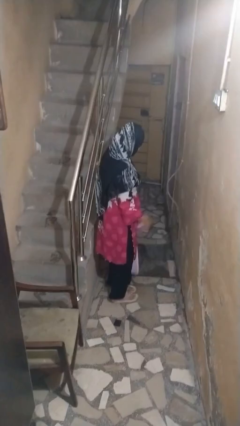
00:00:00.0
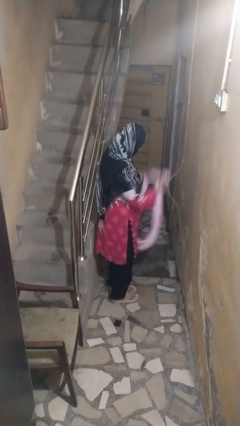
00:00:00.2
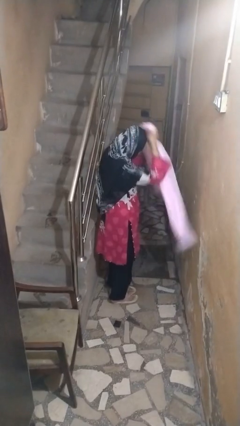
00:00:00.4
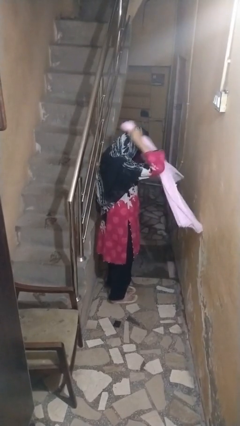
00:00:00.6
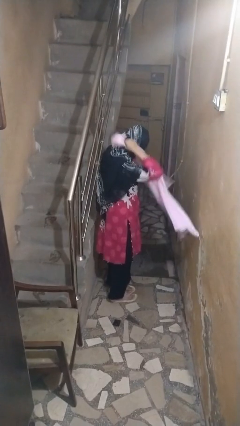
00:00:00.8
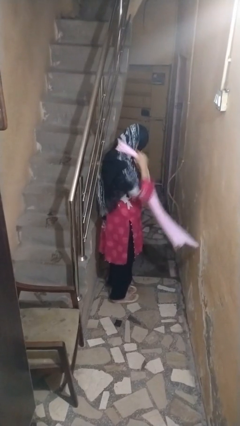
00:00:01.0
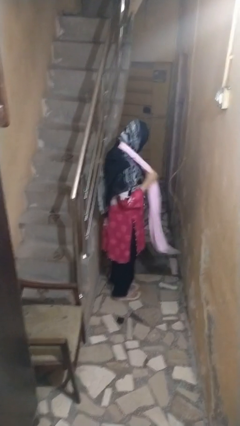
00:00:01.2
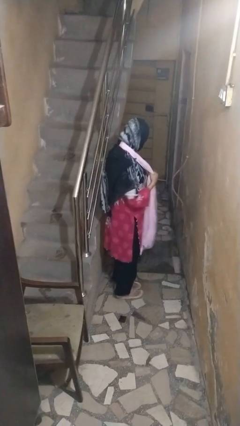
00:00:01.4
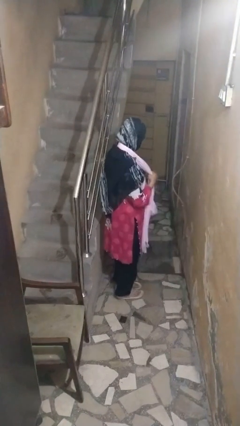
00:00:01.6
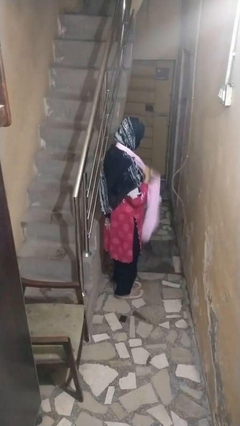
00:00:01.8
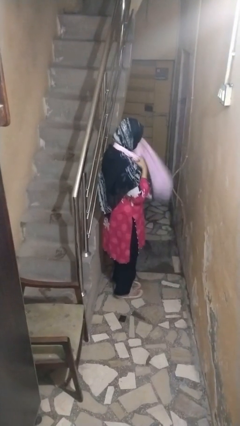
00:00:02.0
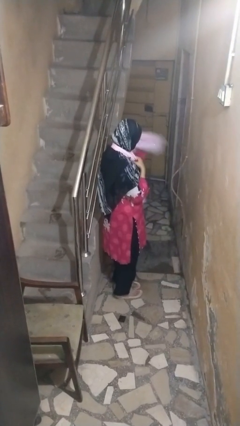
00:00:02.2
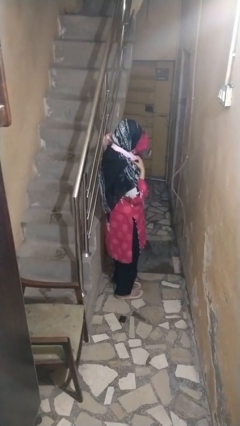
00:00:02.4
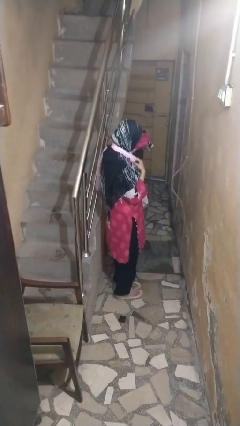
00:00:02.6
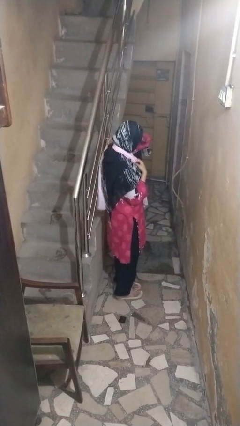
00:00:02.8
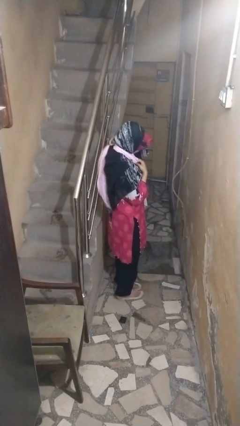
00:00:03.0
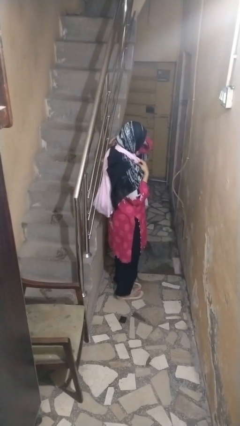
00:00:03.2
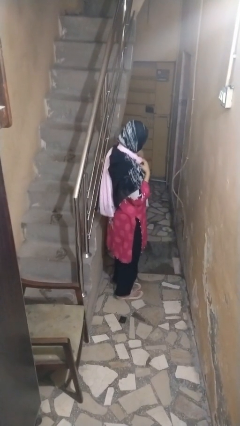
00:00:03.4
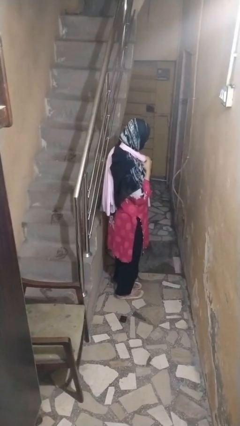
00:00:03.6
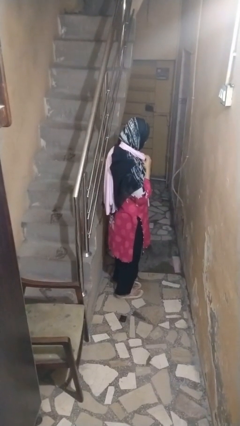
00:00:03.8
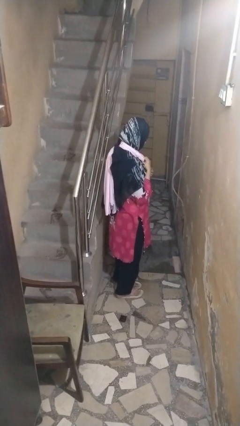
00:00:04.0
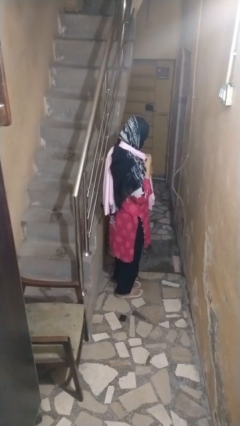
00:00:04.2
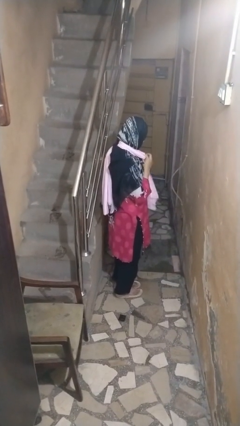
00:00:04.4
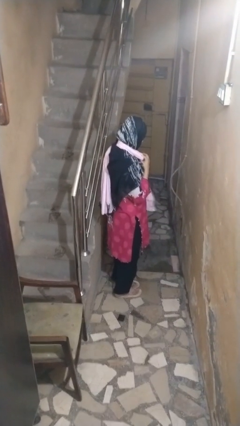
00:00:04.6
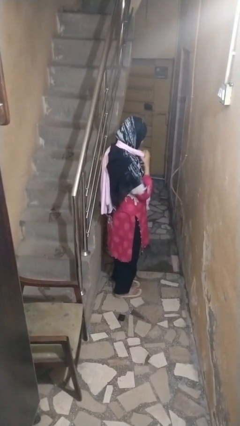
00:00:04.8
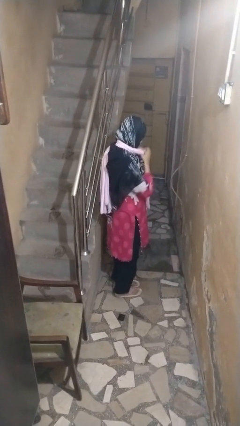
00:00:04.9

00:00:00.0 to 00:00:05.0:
person puts on scarf

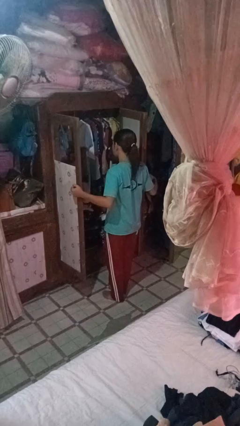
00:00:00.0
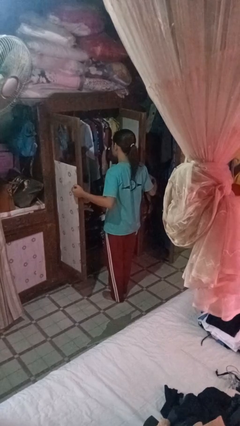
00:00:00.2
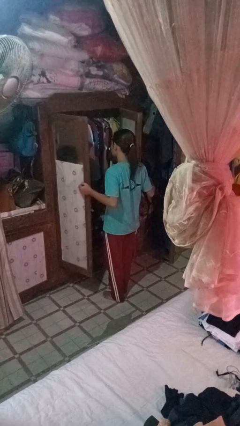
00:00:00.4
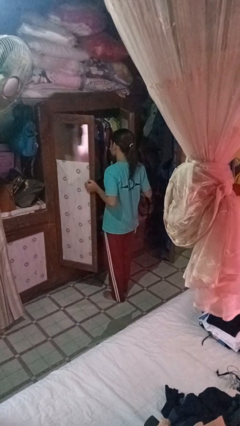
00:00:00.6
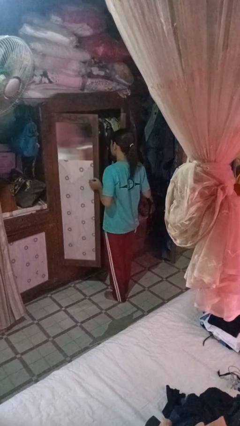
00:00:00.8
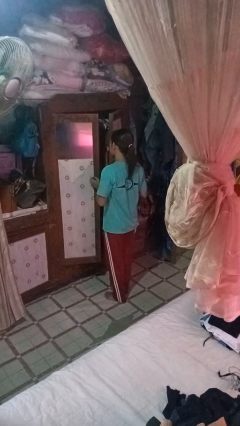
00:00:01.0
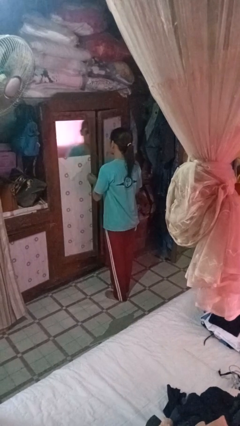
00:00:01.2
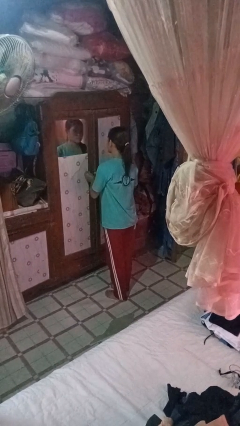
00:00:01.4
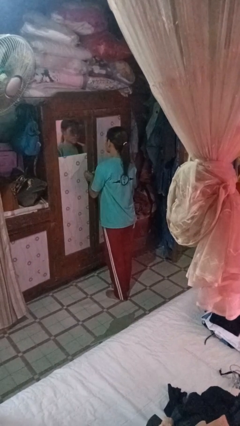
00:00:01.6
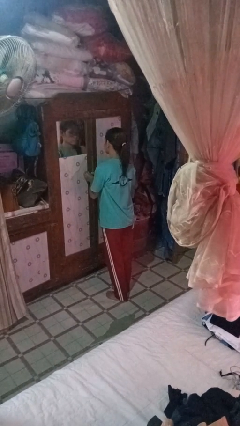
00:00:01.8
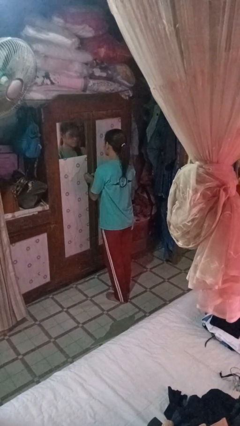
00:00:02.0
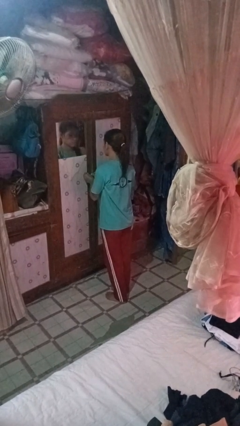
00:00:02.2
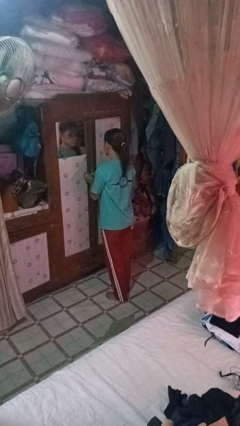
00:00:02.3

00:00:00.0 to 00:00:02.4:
person closes closet door

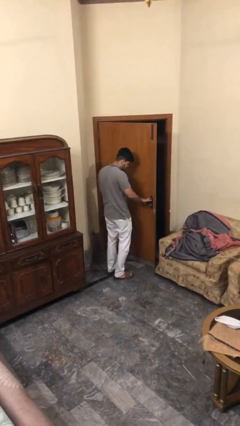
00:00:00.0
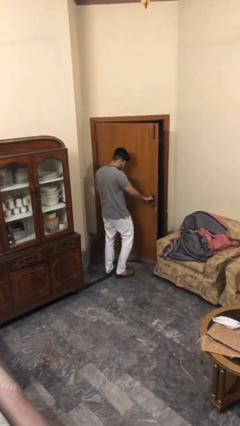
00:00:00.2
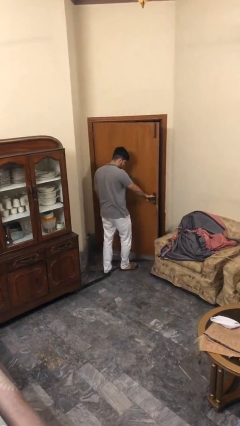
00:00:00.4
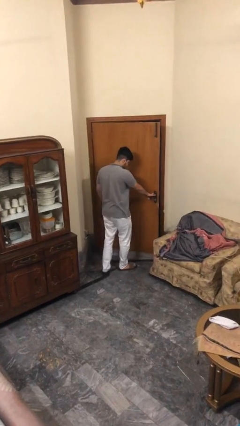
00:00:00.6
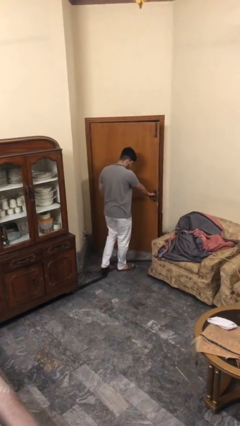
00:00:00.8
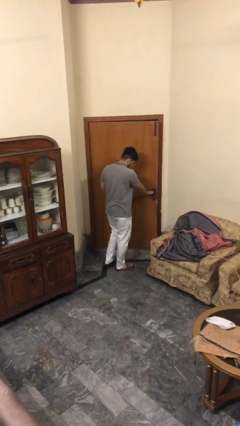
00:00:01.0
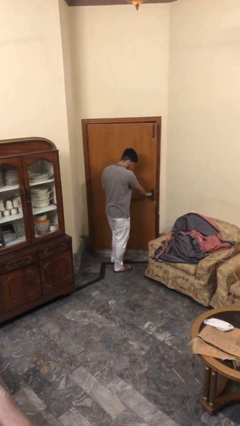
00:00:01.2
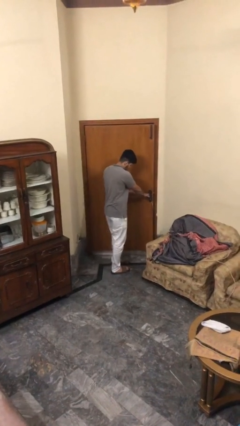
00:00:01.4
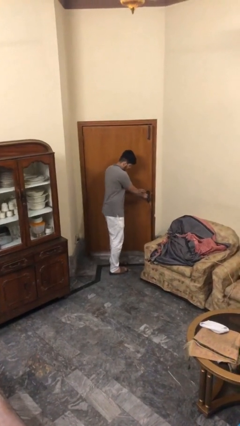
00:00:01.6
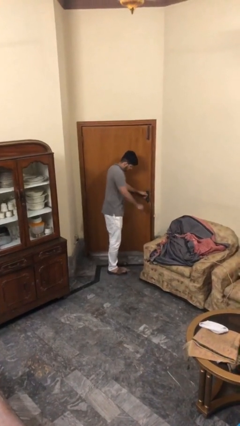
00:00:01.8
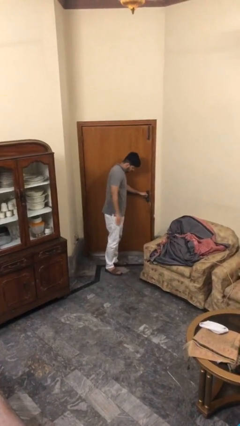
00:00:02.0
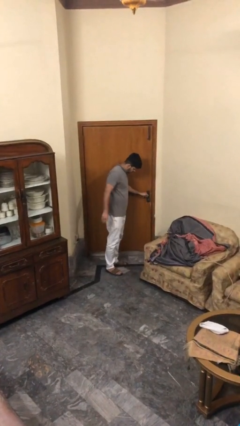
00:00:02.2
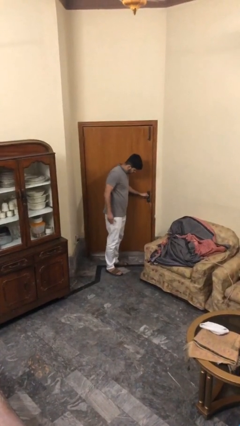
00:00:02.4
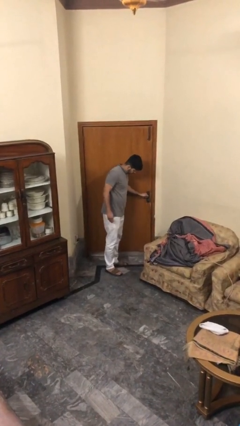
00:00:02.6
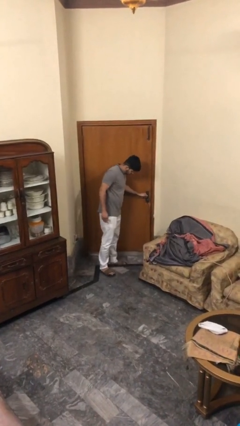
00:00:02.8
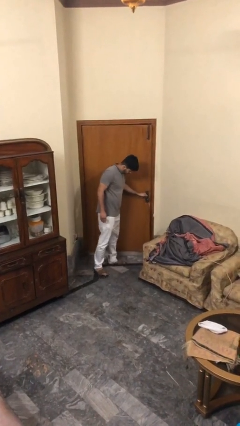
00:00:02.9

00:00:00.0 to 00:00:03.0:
person closes facility door

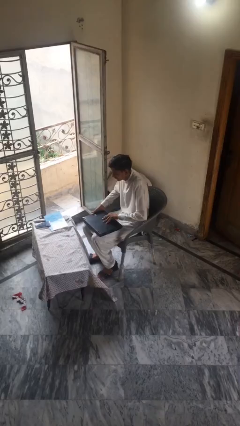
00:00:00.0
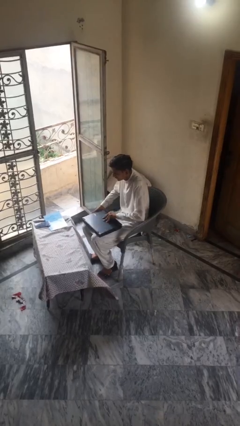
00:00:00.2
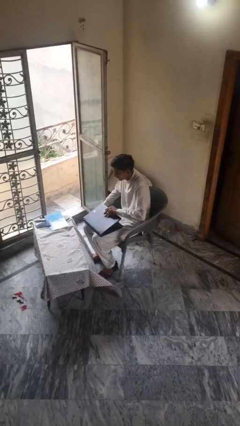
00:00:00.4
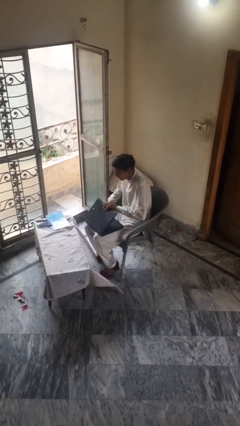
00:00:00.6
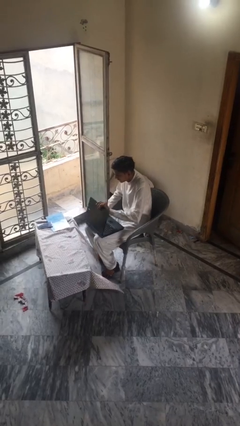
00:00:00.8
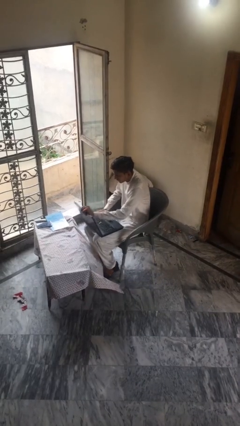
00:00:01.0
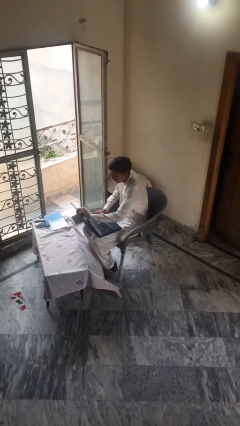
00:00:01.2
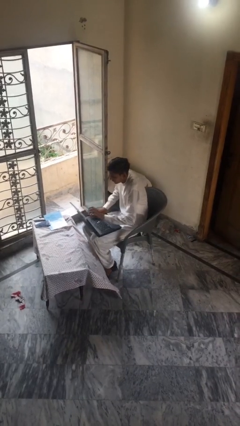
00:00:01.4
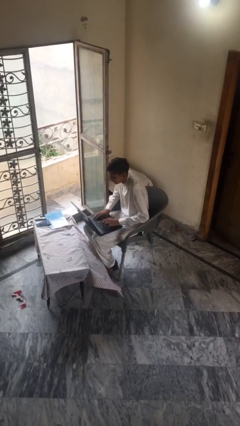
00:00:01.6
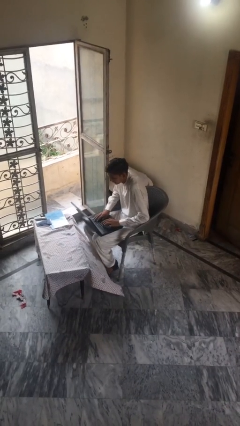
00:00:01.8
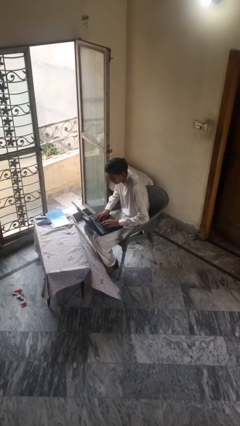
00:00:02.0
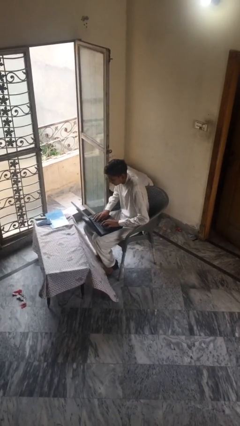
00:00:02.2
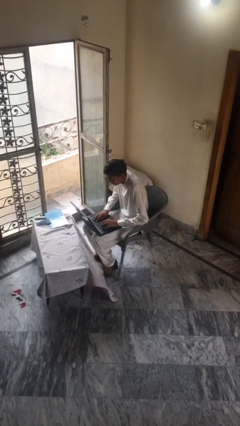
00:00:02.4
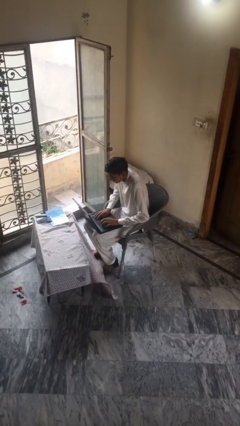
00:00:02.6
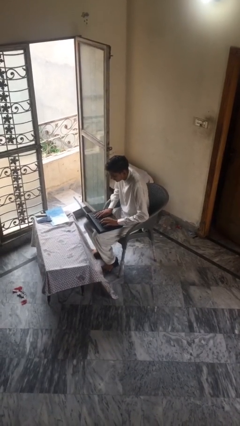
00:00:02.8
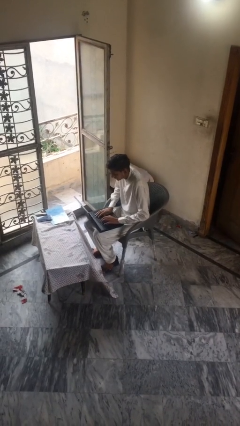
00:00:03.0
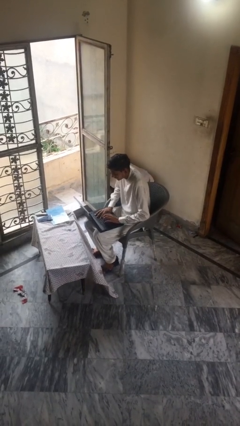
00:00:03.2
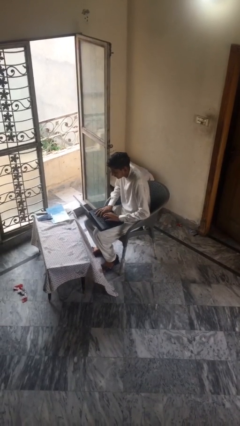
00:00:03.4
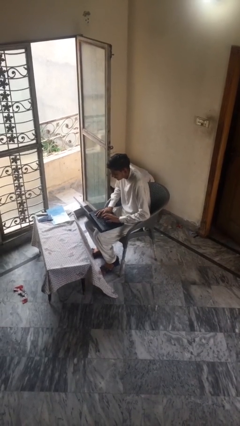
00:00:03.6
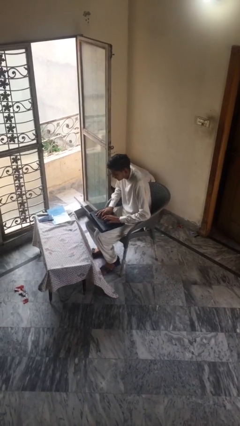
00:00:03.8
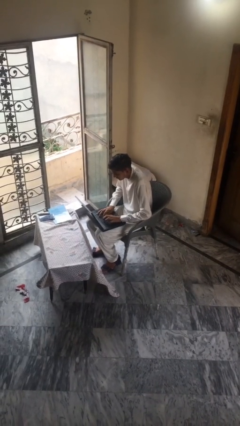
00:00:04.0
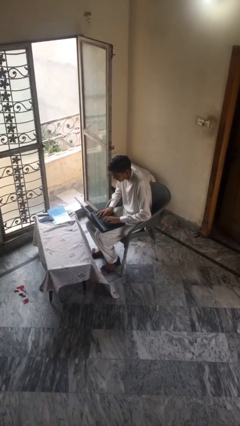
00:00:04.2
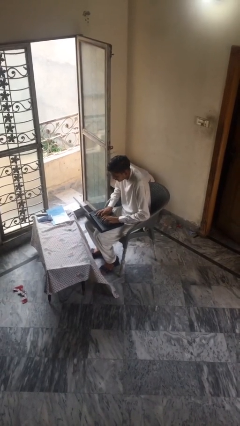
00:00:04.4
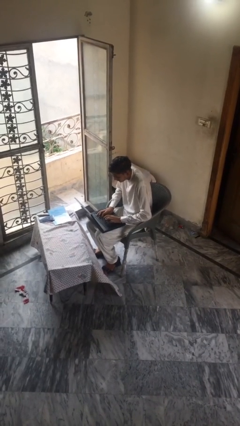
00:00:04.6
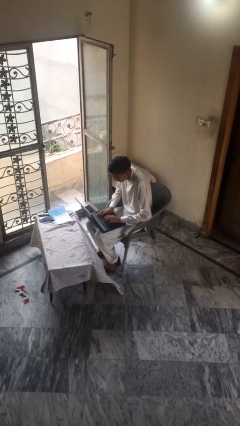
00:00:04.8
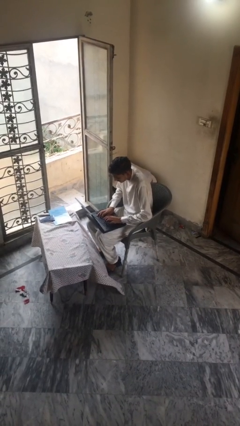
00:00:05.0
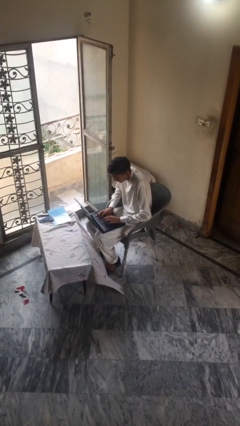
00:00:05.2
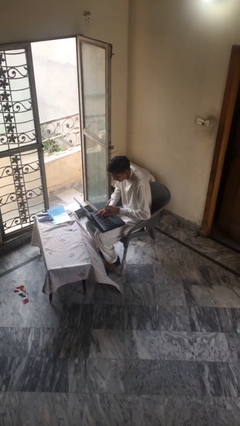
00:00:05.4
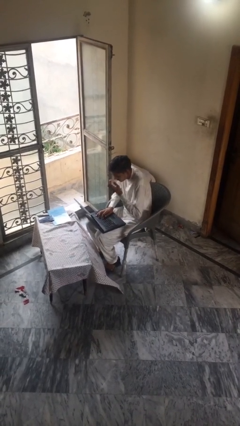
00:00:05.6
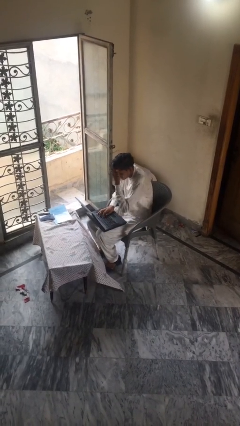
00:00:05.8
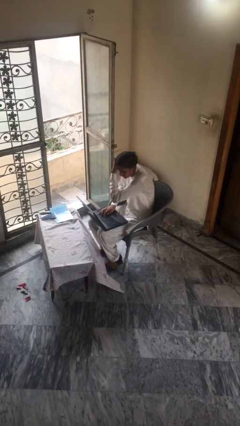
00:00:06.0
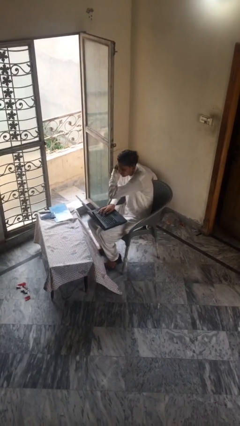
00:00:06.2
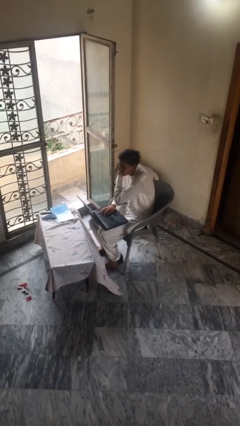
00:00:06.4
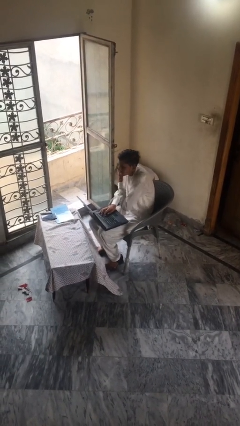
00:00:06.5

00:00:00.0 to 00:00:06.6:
person interacts with laptop

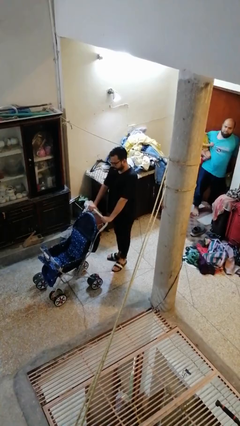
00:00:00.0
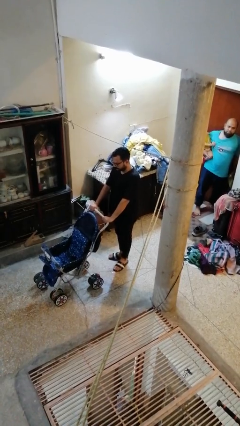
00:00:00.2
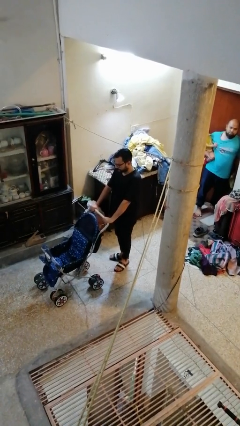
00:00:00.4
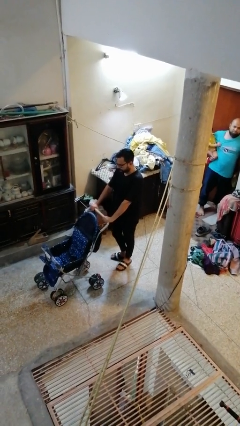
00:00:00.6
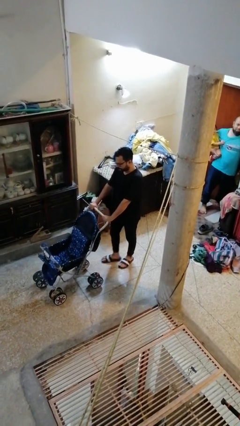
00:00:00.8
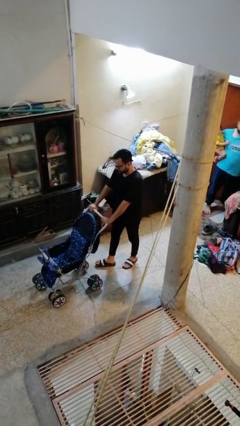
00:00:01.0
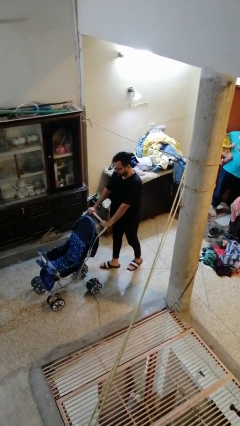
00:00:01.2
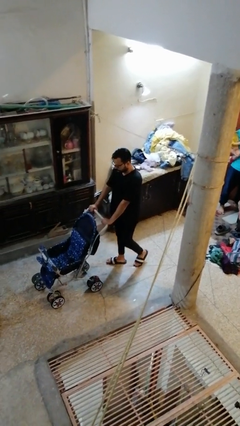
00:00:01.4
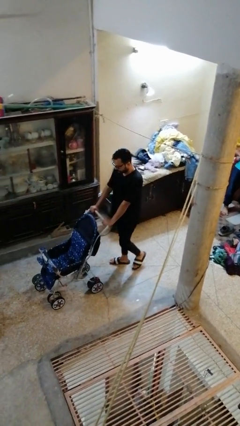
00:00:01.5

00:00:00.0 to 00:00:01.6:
person pushes wheeled cart
